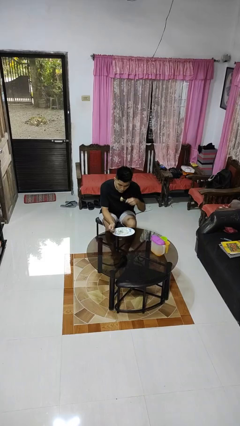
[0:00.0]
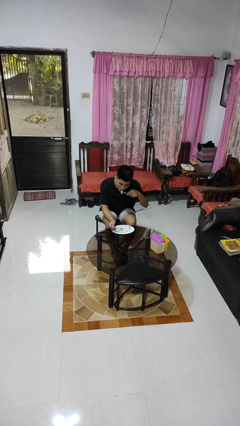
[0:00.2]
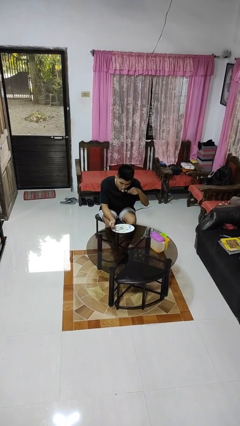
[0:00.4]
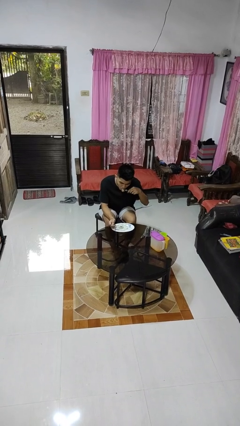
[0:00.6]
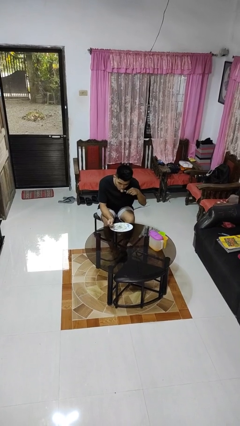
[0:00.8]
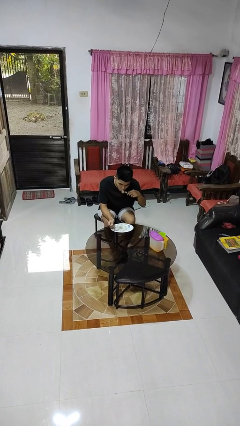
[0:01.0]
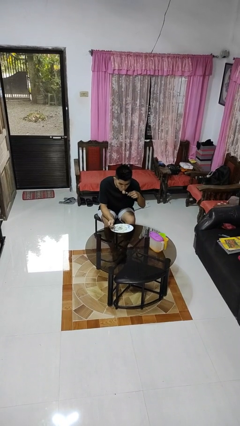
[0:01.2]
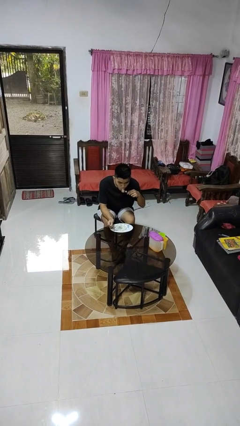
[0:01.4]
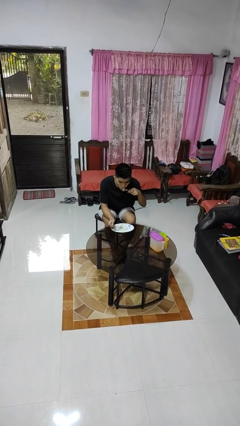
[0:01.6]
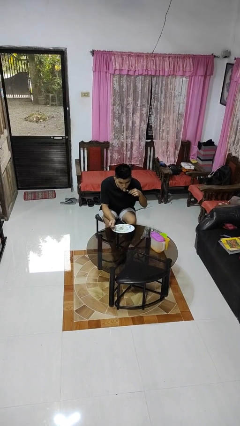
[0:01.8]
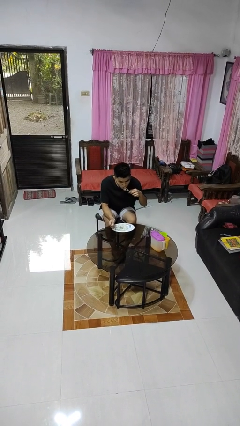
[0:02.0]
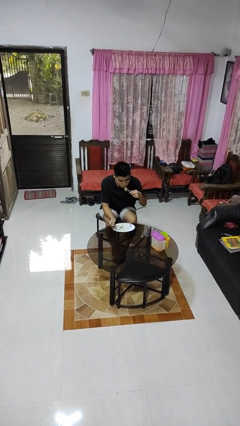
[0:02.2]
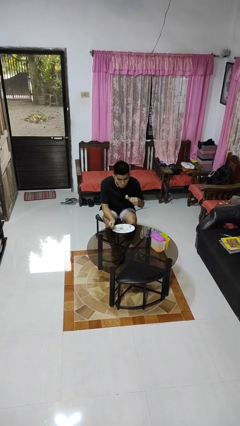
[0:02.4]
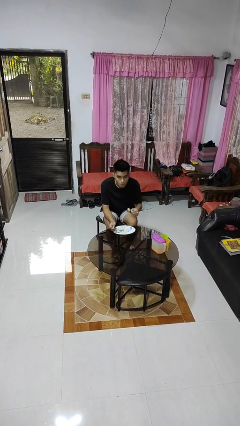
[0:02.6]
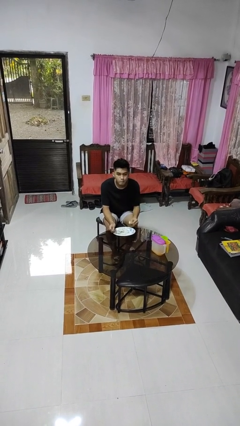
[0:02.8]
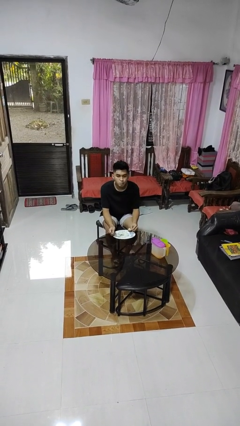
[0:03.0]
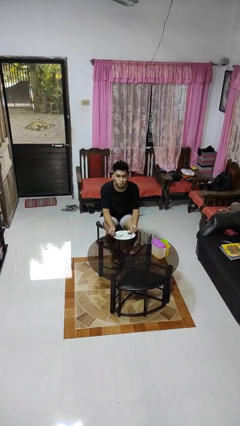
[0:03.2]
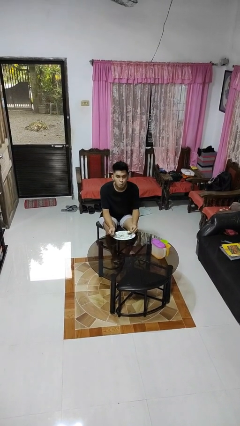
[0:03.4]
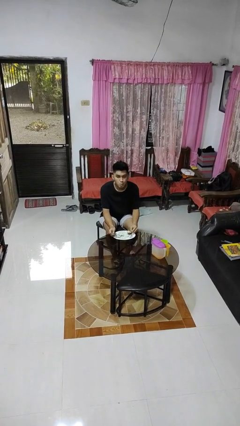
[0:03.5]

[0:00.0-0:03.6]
person eats with utensil

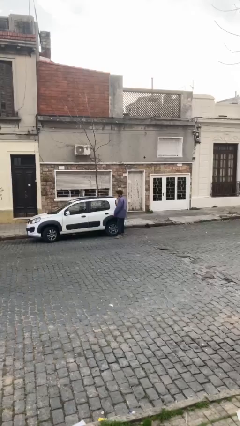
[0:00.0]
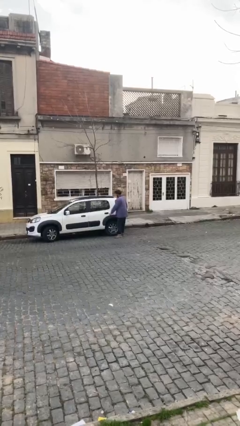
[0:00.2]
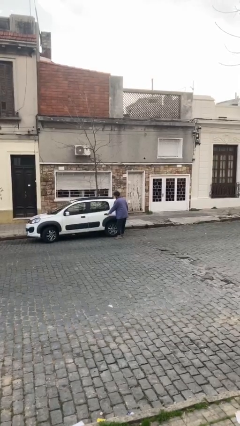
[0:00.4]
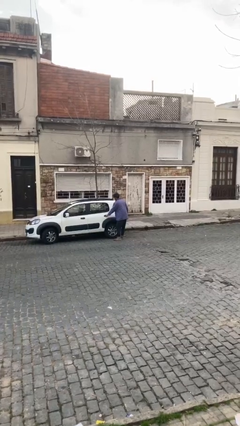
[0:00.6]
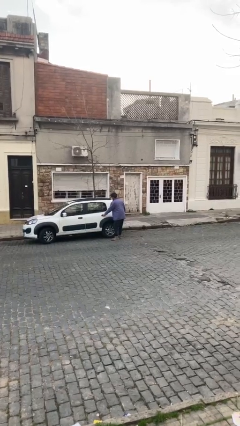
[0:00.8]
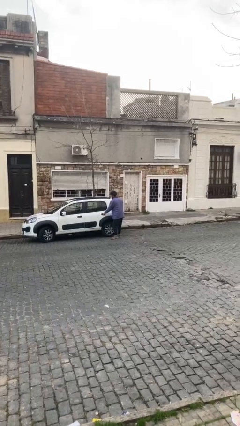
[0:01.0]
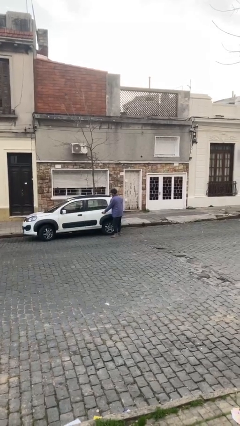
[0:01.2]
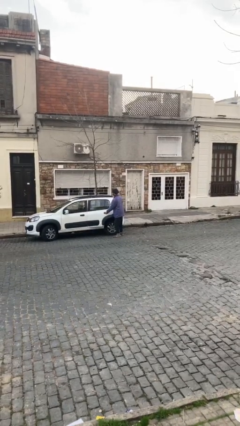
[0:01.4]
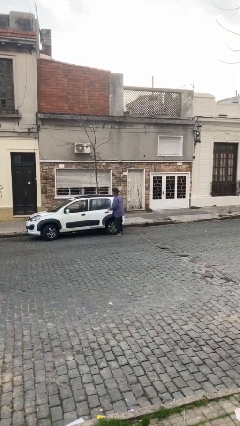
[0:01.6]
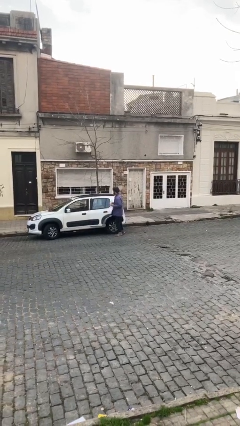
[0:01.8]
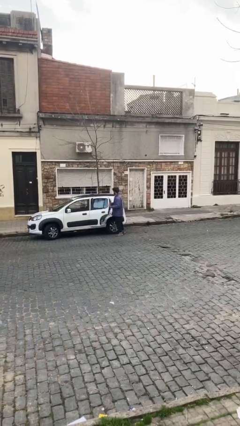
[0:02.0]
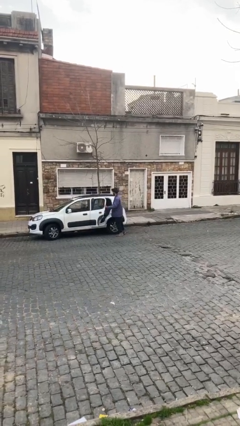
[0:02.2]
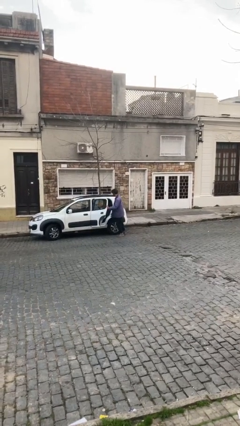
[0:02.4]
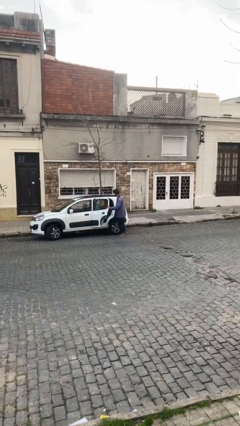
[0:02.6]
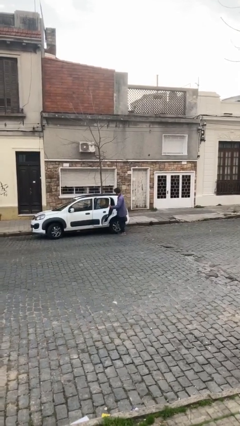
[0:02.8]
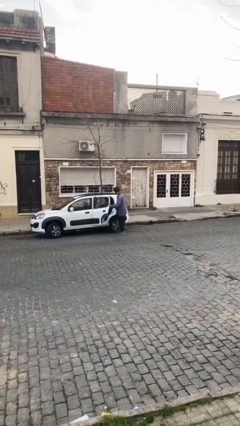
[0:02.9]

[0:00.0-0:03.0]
person opens car door

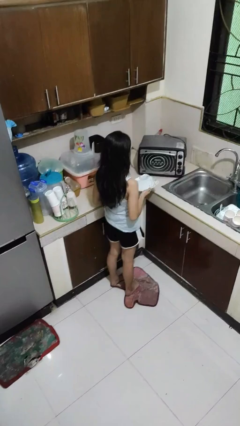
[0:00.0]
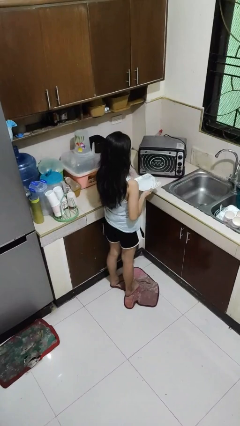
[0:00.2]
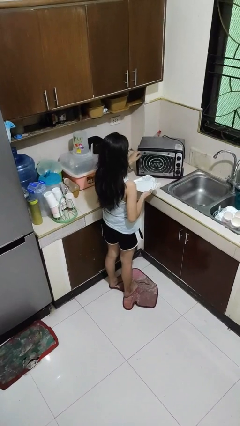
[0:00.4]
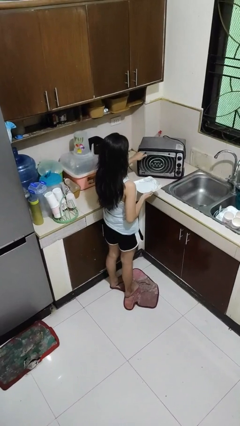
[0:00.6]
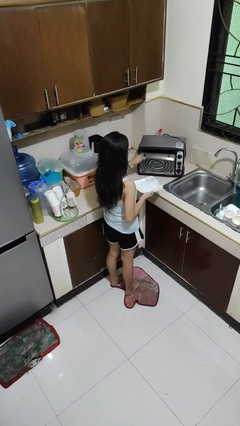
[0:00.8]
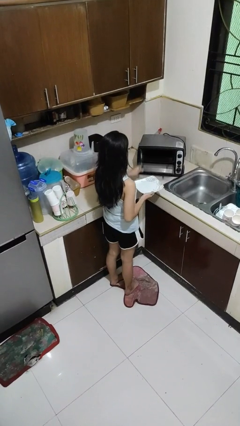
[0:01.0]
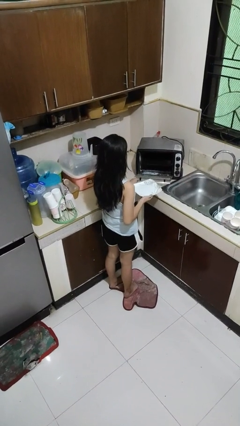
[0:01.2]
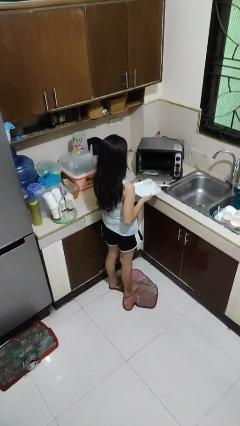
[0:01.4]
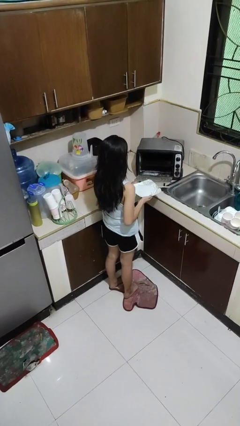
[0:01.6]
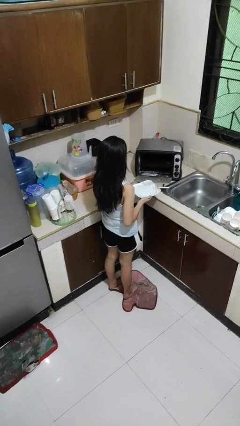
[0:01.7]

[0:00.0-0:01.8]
person opens microwave

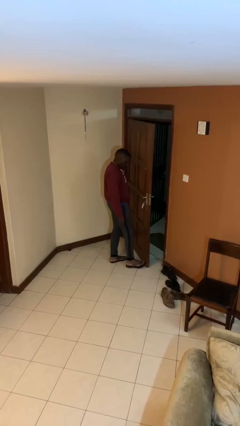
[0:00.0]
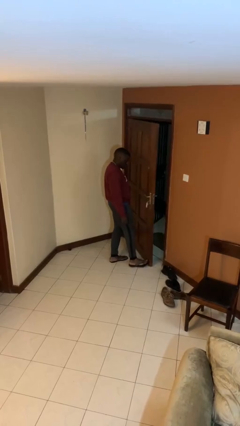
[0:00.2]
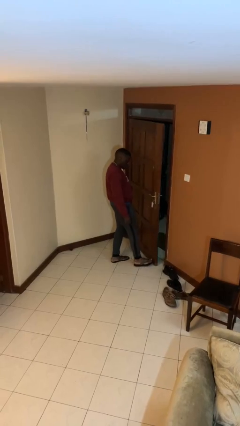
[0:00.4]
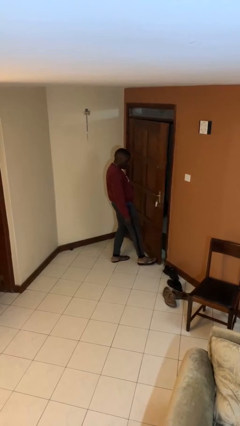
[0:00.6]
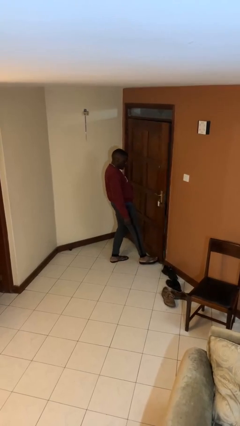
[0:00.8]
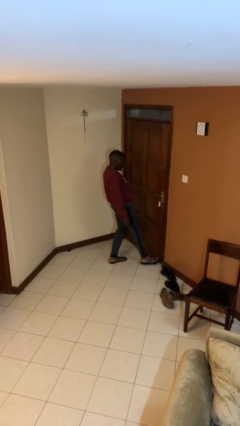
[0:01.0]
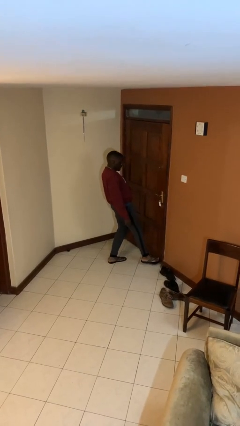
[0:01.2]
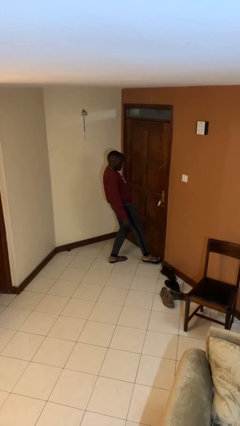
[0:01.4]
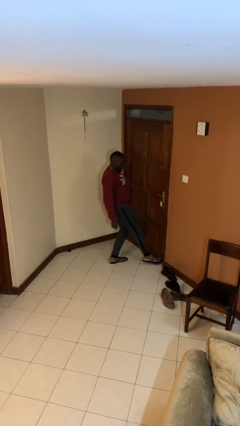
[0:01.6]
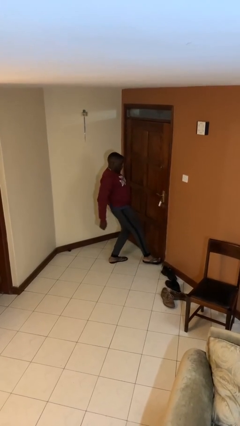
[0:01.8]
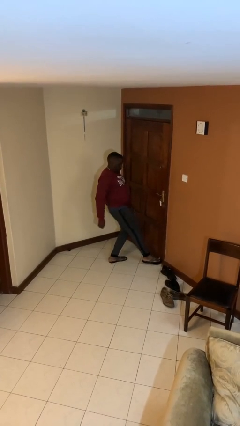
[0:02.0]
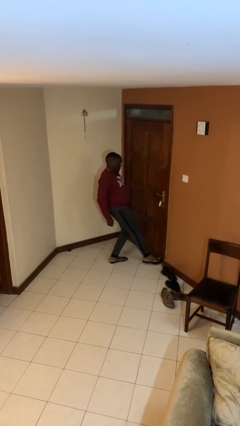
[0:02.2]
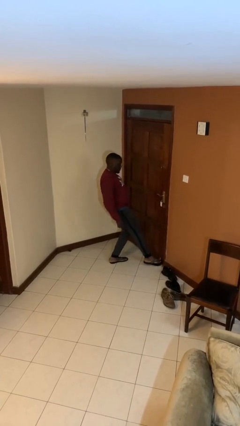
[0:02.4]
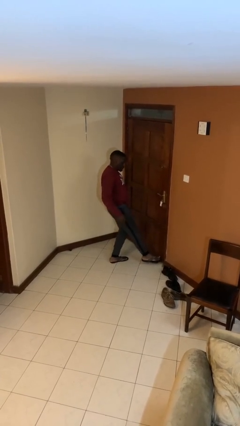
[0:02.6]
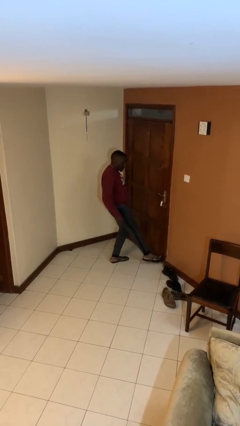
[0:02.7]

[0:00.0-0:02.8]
person closes door with foot

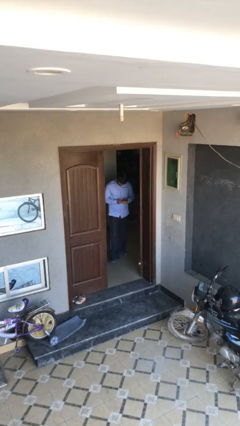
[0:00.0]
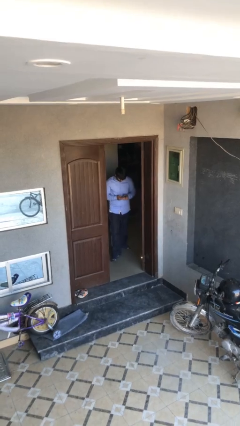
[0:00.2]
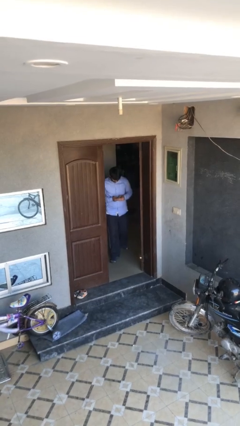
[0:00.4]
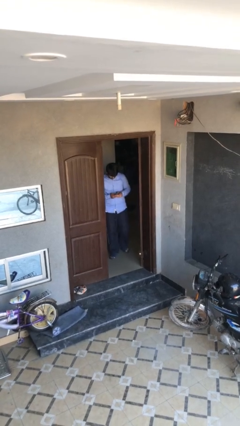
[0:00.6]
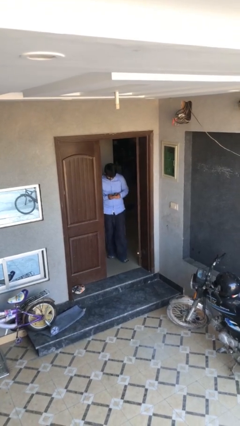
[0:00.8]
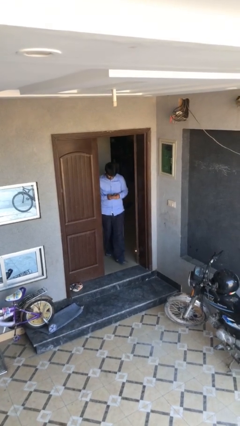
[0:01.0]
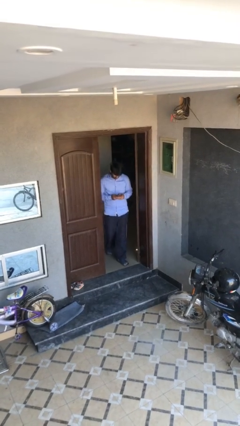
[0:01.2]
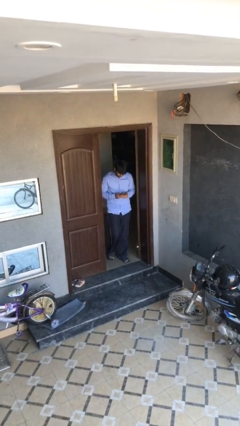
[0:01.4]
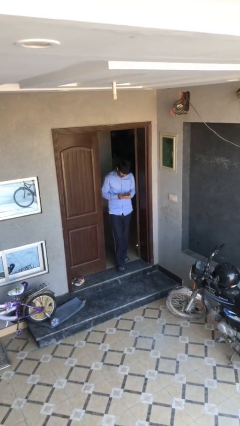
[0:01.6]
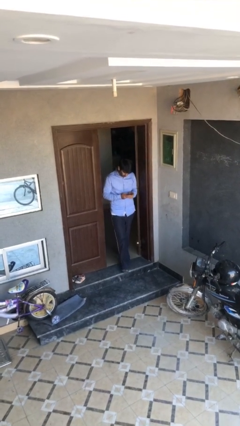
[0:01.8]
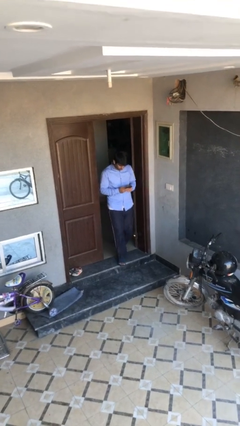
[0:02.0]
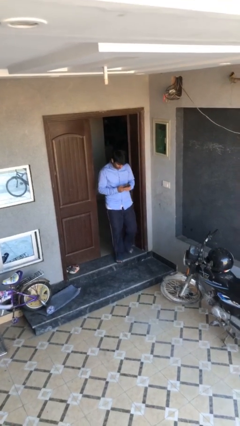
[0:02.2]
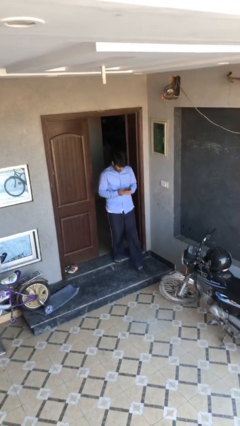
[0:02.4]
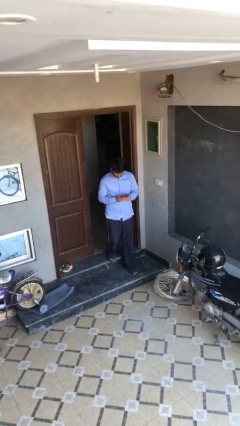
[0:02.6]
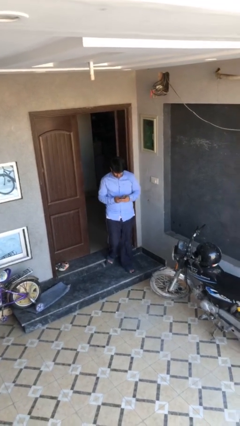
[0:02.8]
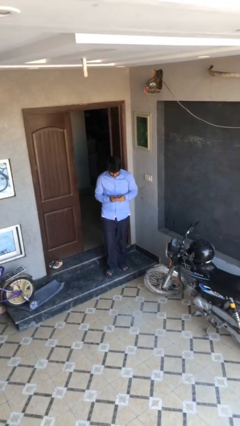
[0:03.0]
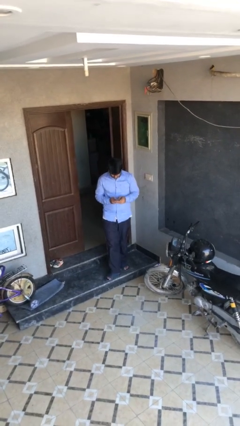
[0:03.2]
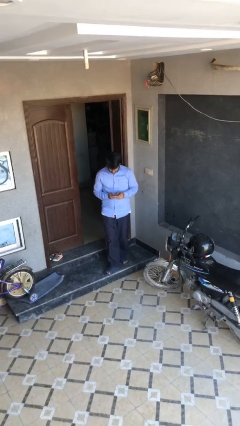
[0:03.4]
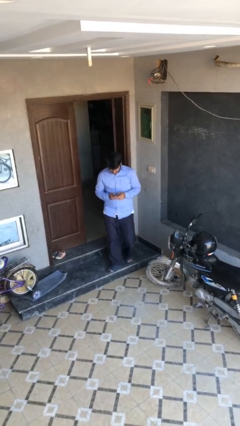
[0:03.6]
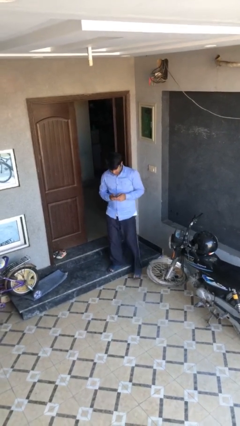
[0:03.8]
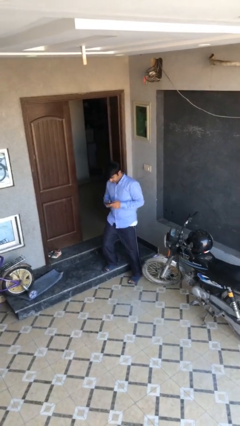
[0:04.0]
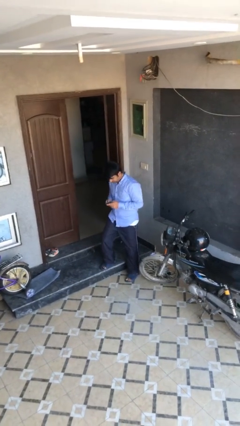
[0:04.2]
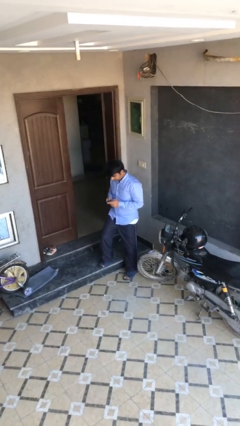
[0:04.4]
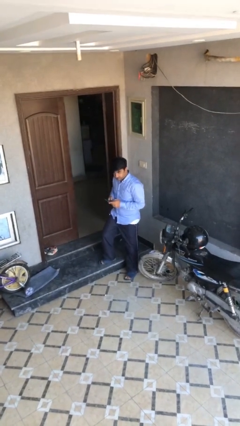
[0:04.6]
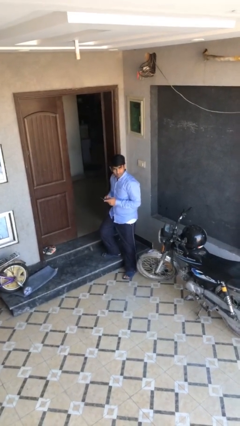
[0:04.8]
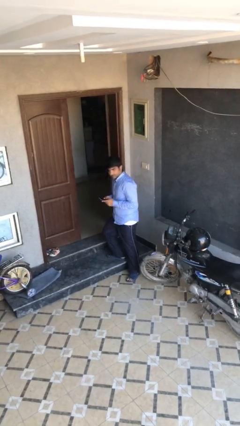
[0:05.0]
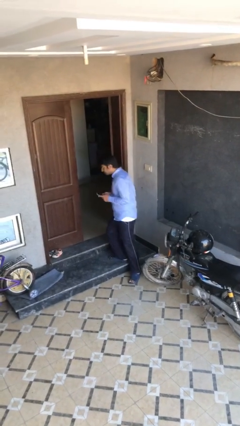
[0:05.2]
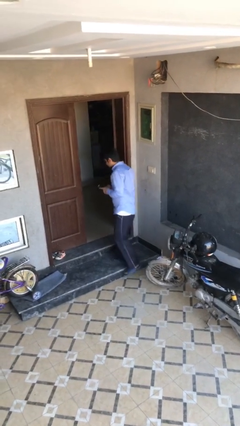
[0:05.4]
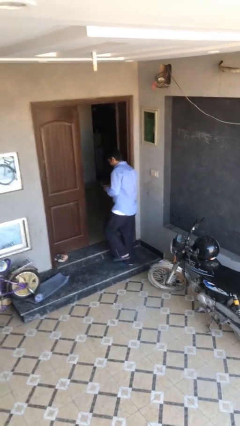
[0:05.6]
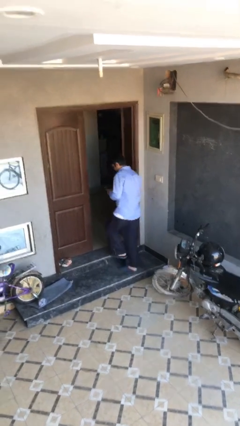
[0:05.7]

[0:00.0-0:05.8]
person enters scene through structure

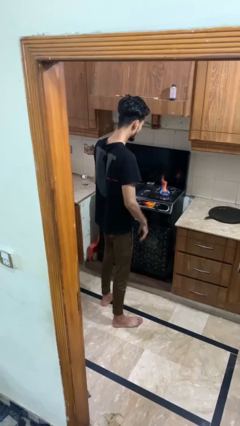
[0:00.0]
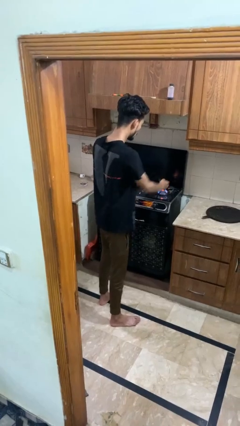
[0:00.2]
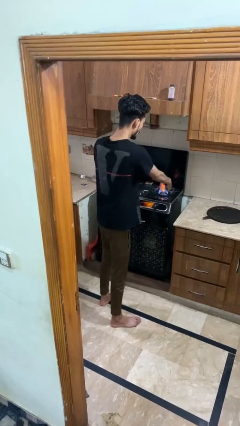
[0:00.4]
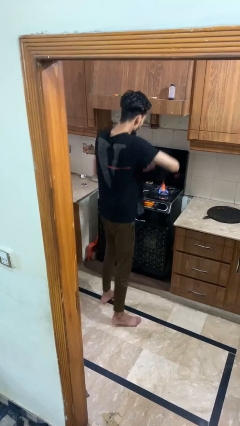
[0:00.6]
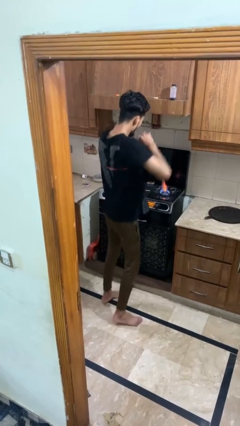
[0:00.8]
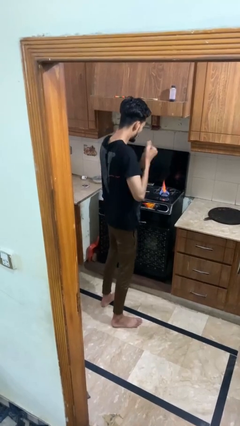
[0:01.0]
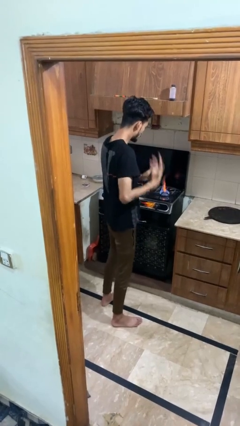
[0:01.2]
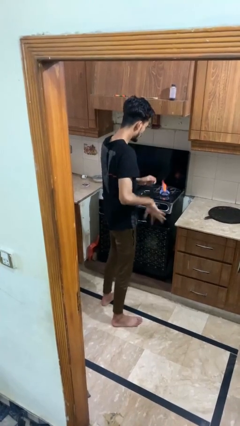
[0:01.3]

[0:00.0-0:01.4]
person burns hand
